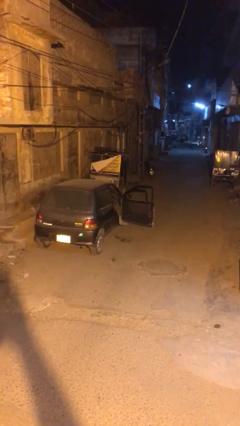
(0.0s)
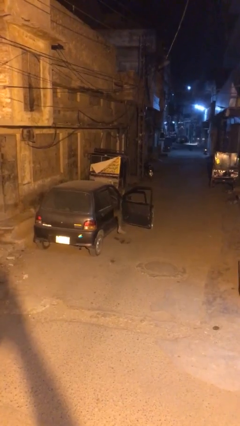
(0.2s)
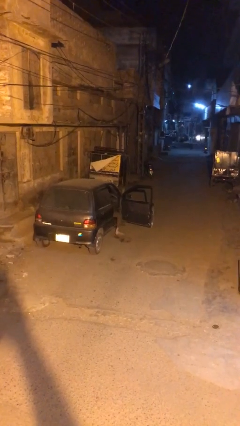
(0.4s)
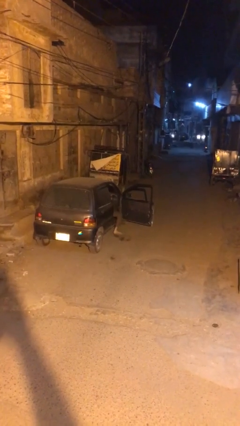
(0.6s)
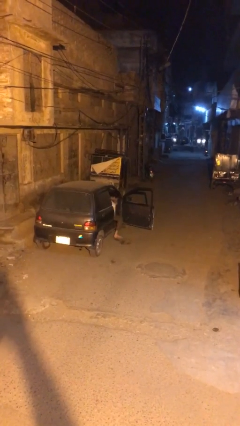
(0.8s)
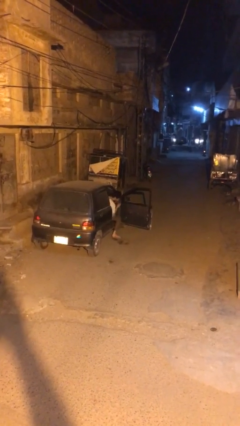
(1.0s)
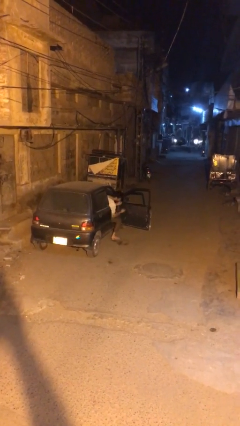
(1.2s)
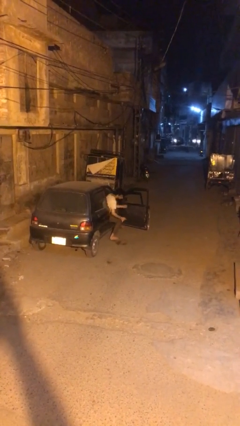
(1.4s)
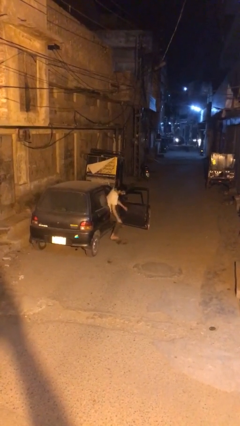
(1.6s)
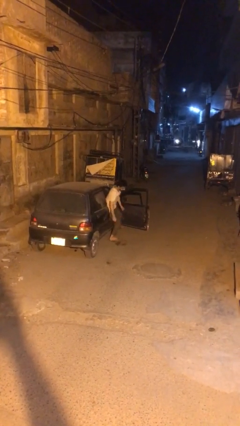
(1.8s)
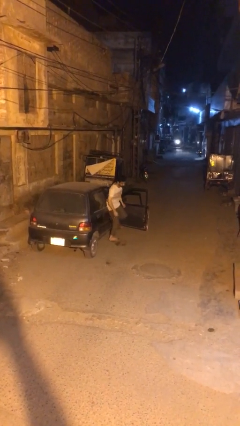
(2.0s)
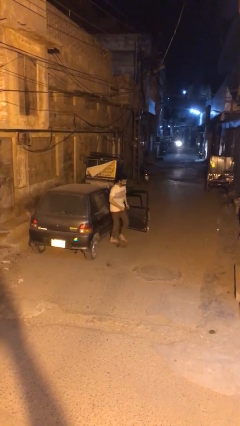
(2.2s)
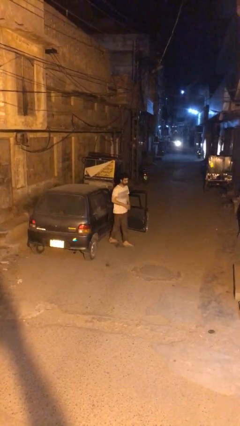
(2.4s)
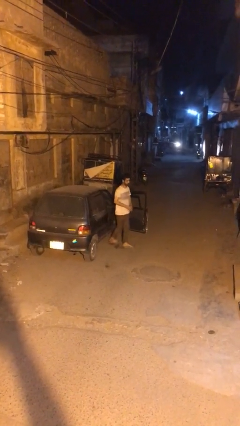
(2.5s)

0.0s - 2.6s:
person exits car

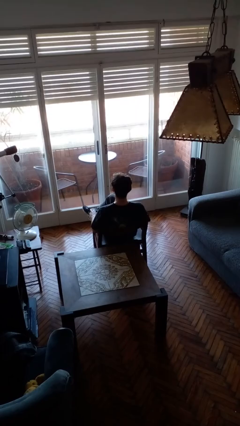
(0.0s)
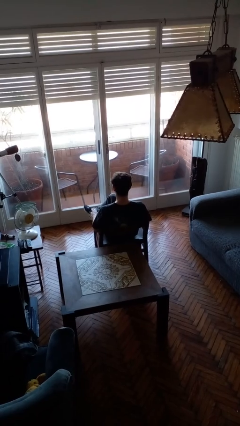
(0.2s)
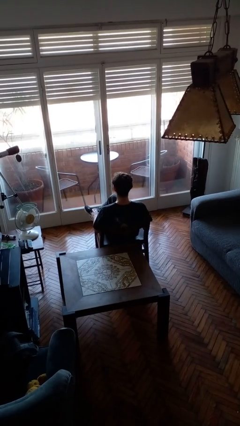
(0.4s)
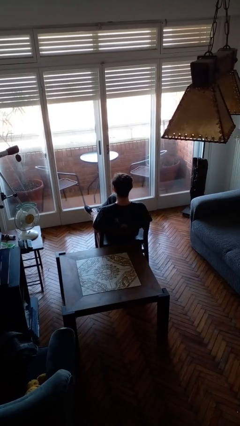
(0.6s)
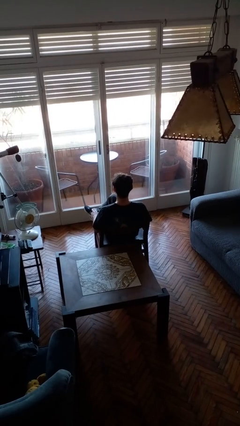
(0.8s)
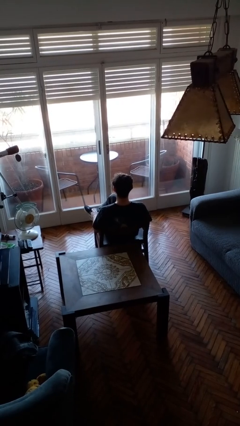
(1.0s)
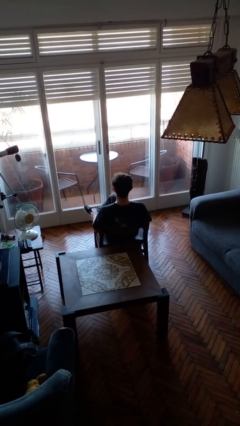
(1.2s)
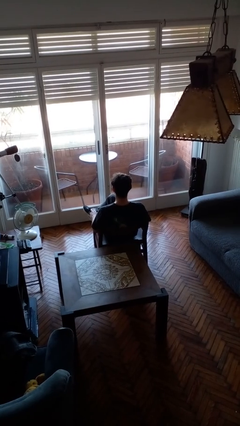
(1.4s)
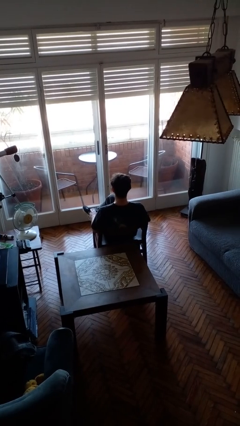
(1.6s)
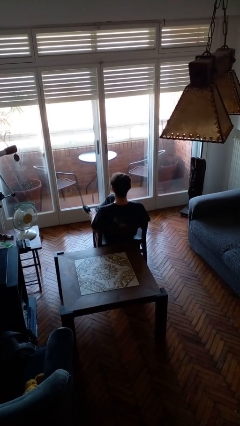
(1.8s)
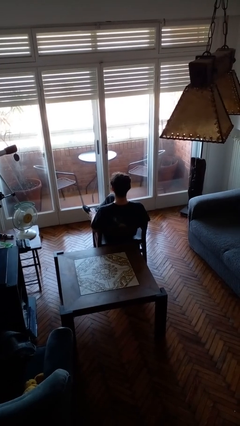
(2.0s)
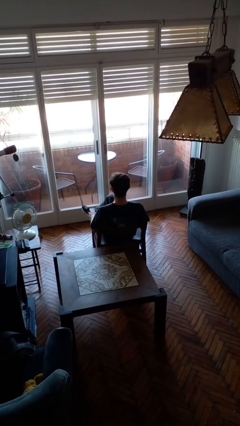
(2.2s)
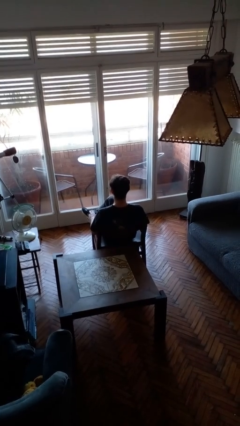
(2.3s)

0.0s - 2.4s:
person nods head

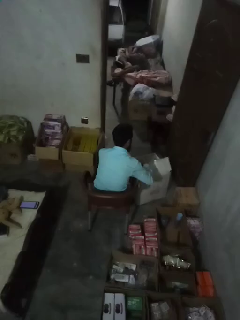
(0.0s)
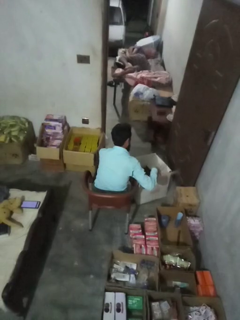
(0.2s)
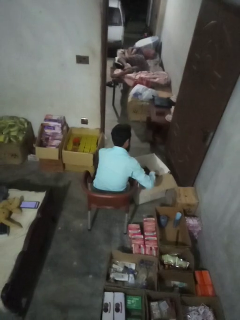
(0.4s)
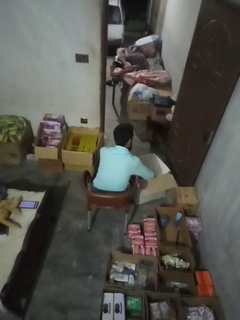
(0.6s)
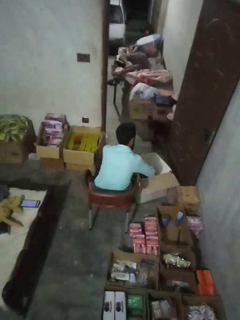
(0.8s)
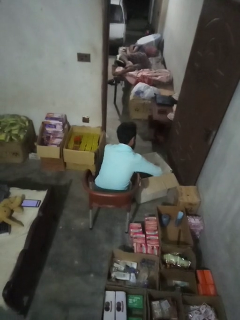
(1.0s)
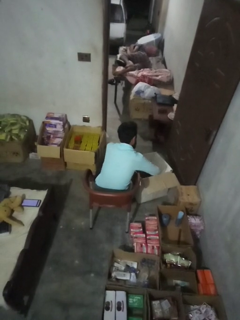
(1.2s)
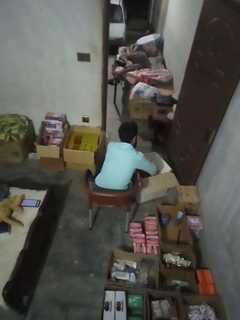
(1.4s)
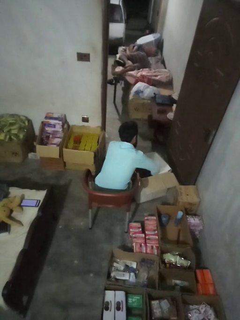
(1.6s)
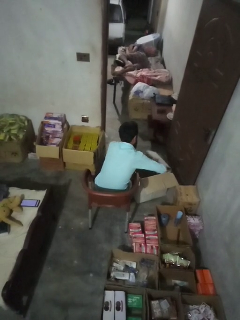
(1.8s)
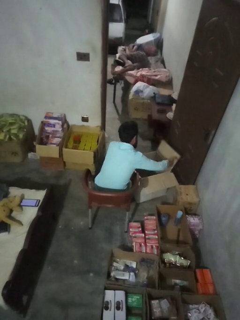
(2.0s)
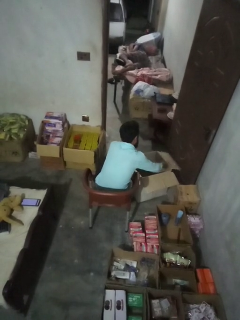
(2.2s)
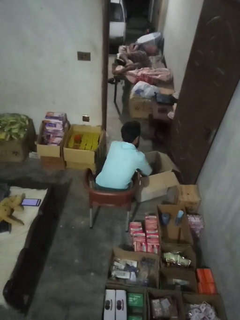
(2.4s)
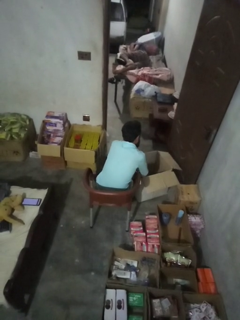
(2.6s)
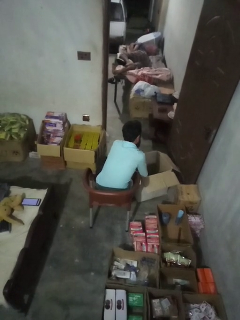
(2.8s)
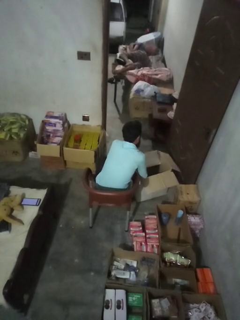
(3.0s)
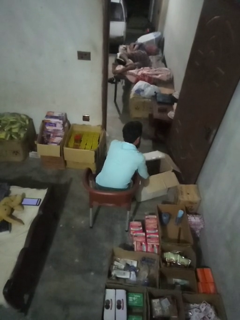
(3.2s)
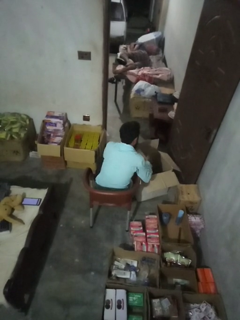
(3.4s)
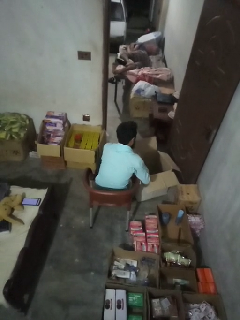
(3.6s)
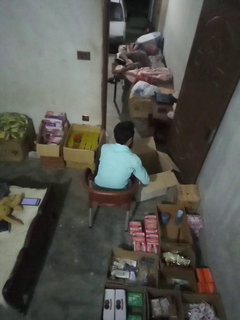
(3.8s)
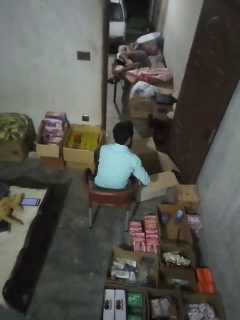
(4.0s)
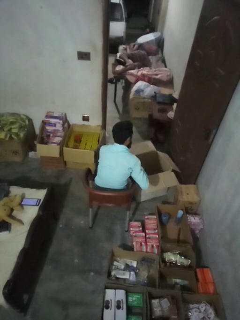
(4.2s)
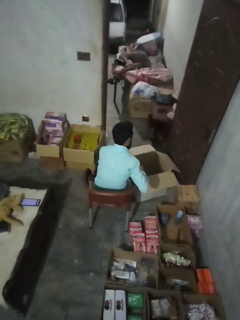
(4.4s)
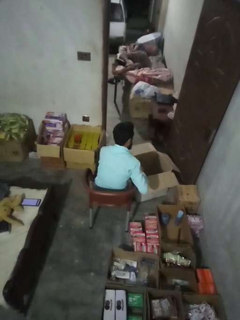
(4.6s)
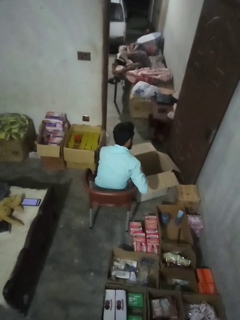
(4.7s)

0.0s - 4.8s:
person opens box

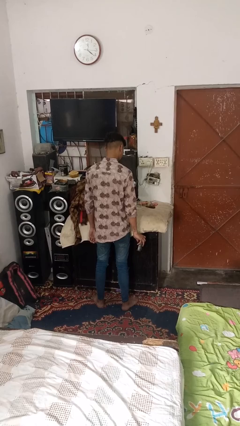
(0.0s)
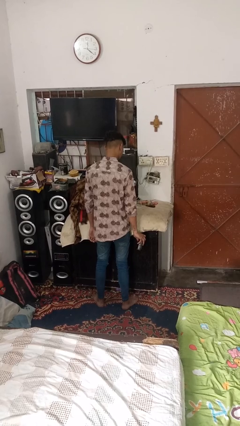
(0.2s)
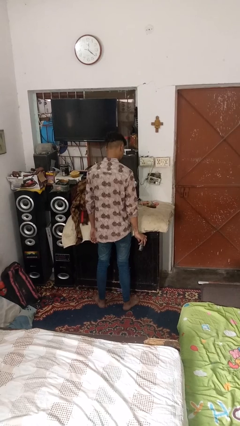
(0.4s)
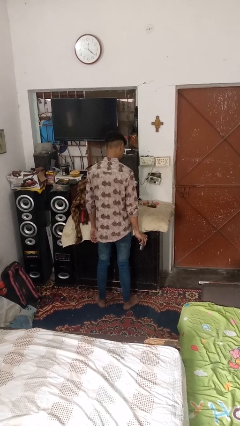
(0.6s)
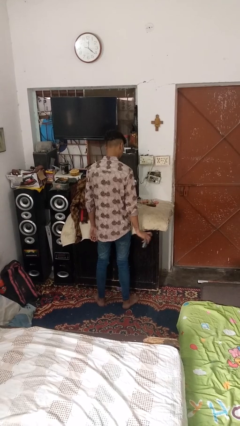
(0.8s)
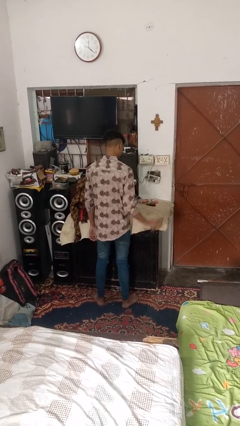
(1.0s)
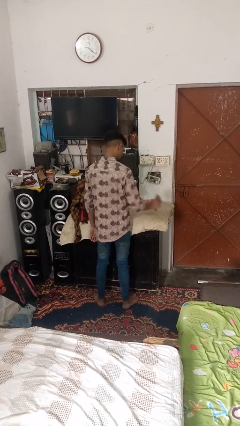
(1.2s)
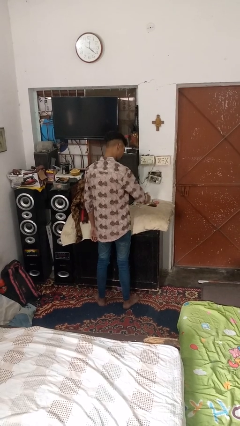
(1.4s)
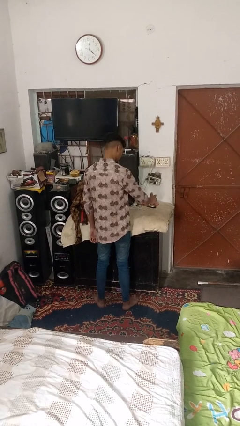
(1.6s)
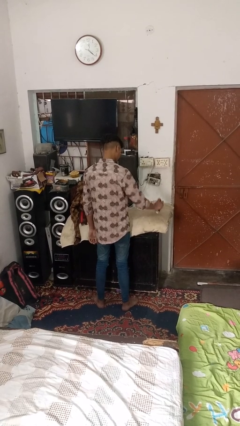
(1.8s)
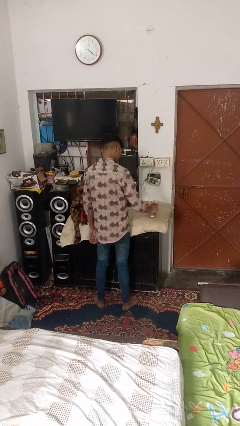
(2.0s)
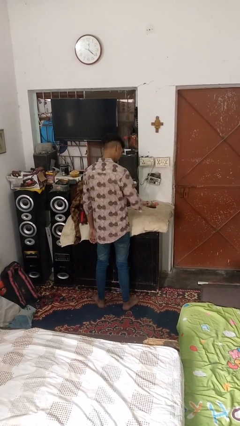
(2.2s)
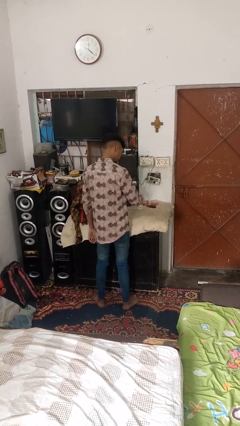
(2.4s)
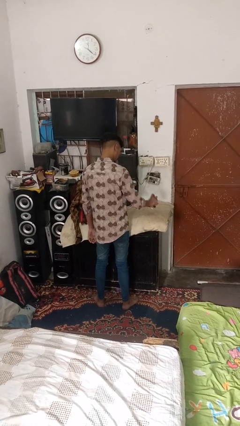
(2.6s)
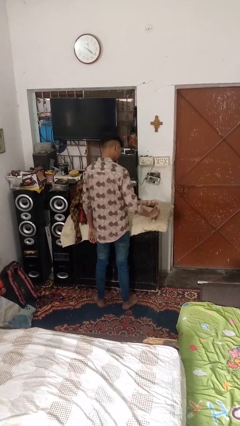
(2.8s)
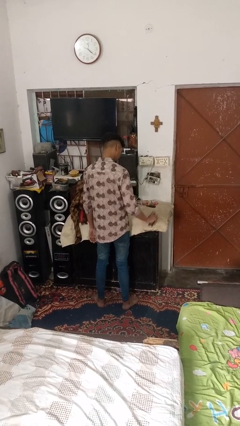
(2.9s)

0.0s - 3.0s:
person sprays from bottle

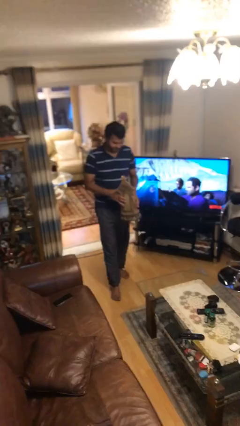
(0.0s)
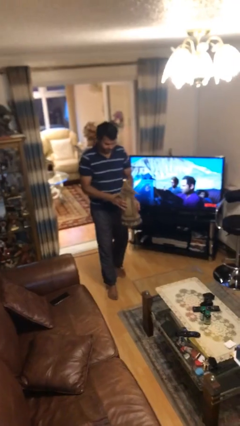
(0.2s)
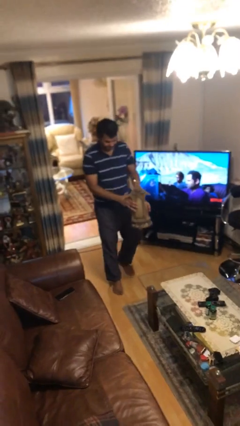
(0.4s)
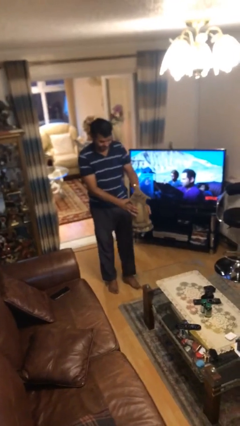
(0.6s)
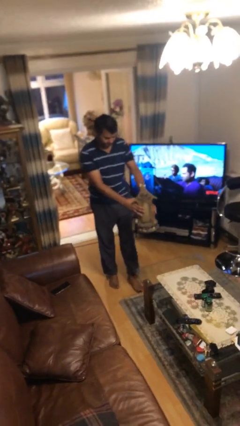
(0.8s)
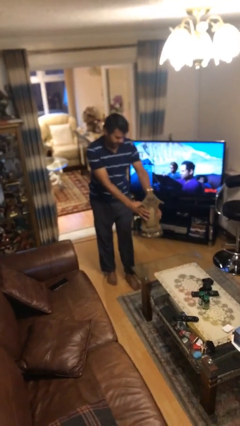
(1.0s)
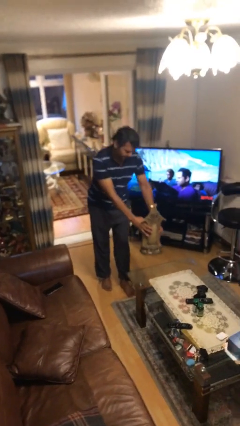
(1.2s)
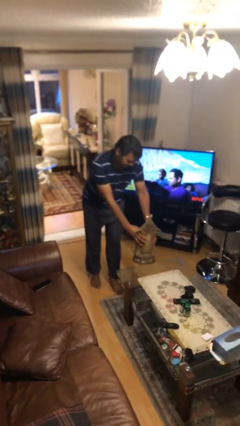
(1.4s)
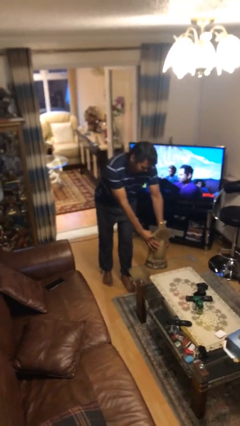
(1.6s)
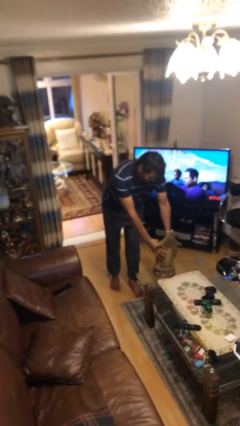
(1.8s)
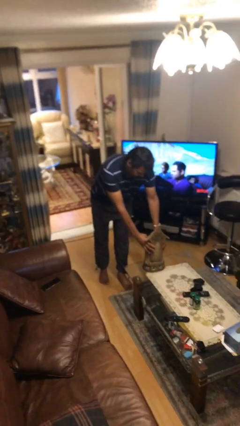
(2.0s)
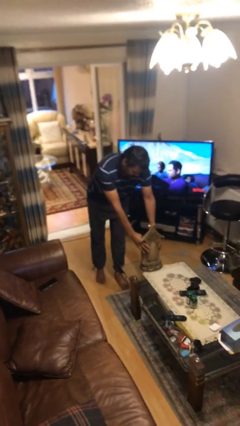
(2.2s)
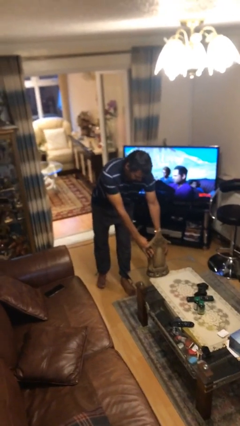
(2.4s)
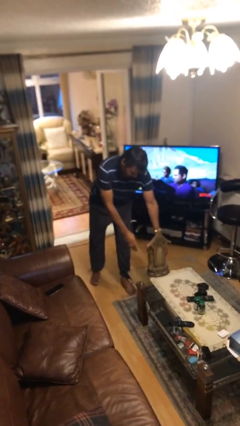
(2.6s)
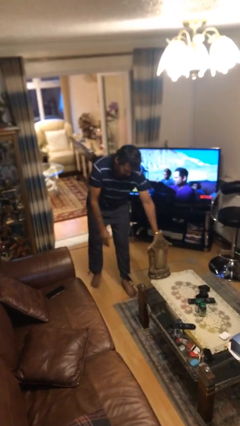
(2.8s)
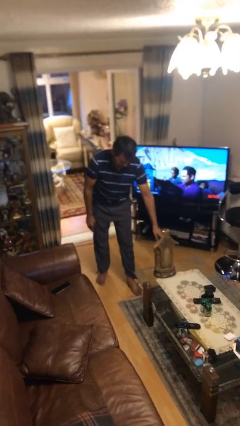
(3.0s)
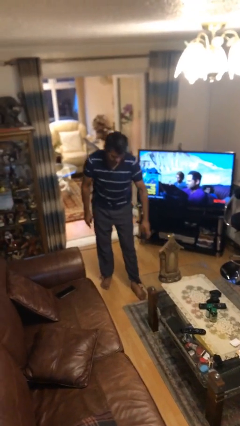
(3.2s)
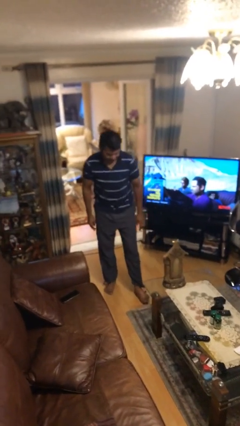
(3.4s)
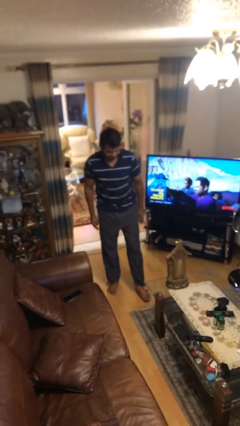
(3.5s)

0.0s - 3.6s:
person puts down object on table

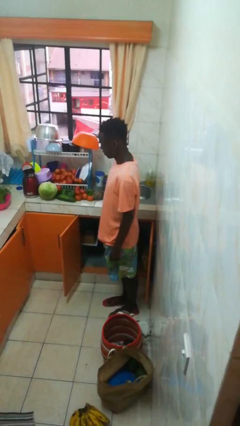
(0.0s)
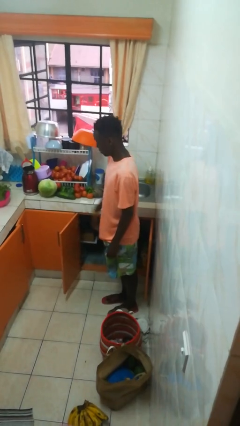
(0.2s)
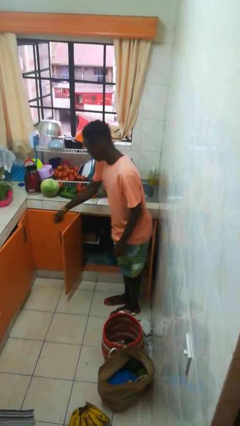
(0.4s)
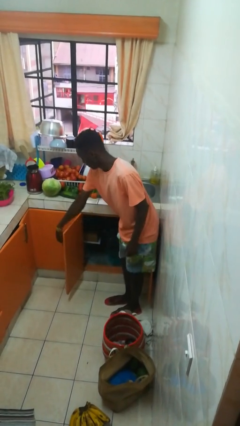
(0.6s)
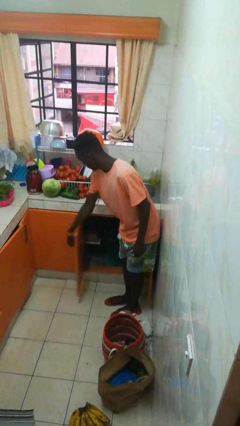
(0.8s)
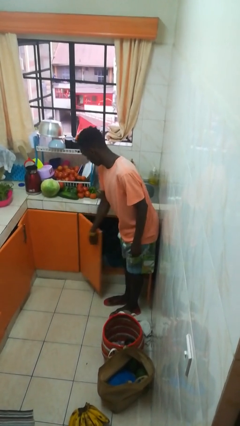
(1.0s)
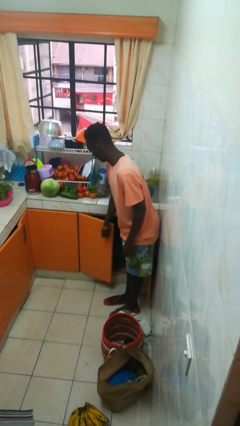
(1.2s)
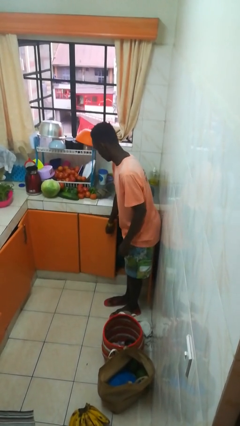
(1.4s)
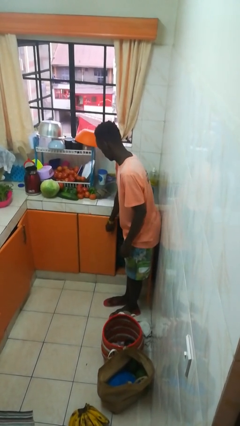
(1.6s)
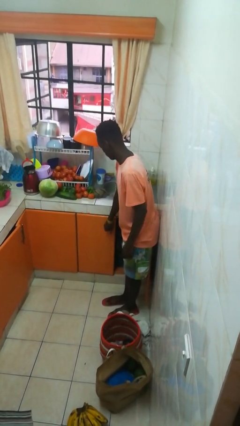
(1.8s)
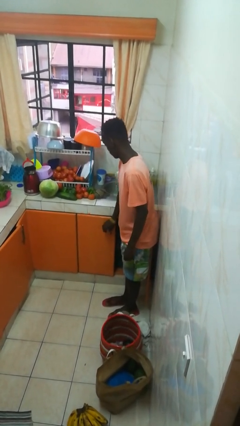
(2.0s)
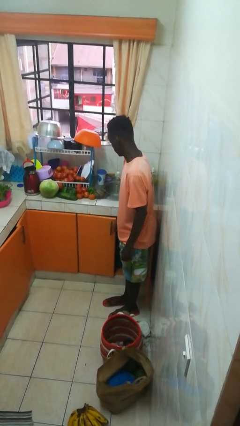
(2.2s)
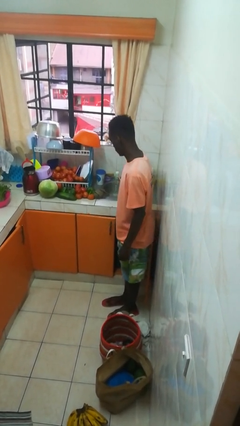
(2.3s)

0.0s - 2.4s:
person closes cabinet
